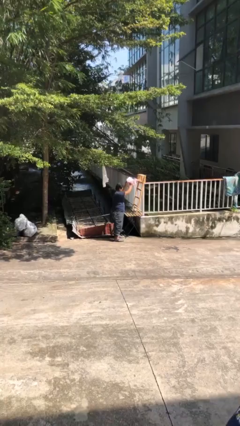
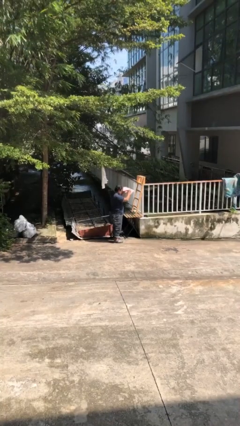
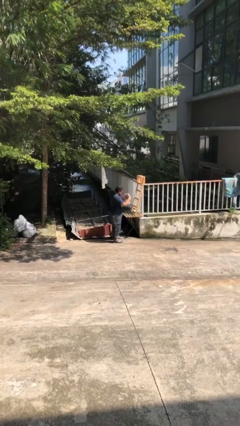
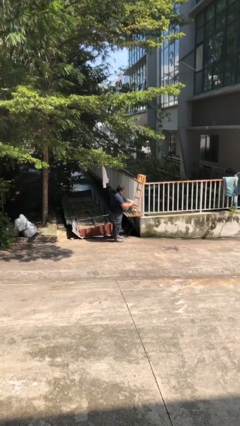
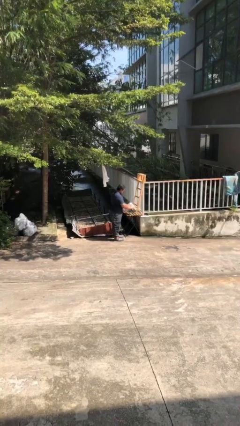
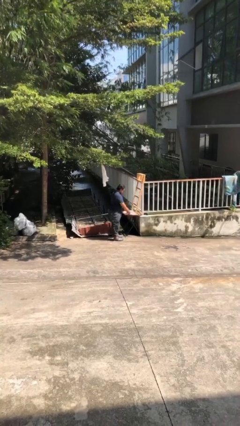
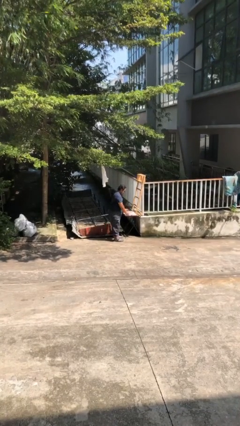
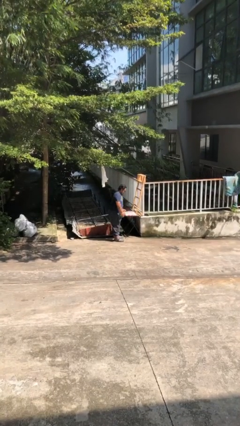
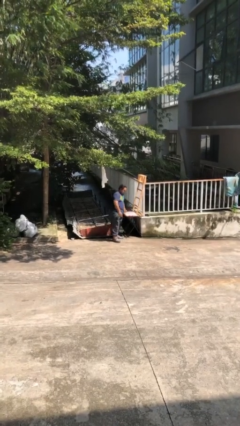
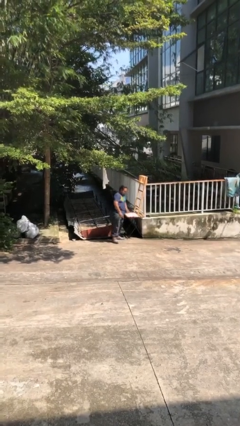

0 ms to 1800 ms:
person puts down object on table

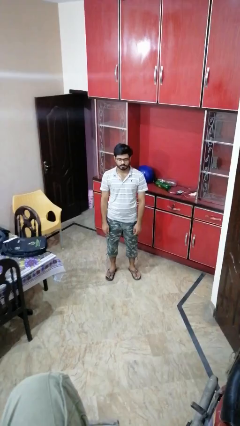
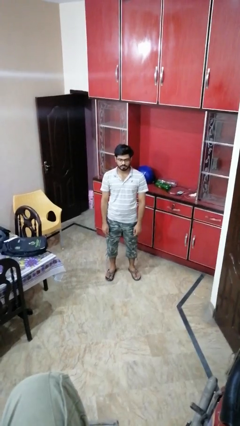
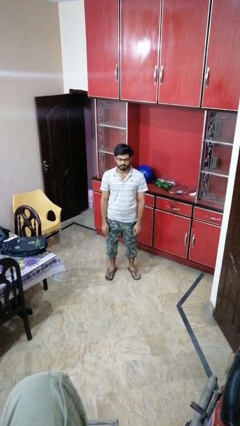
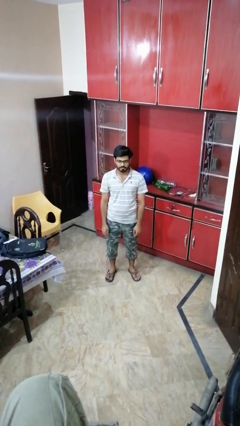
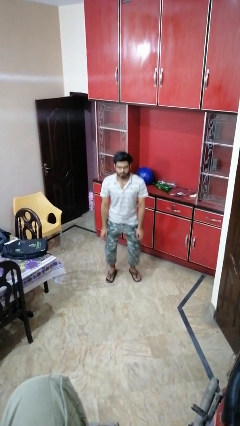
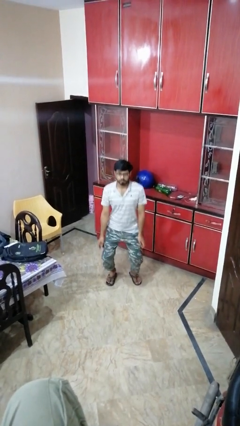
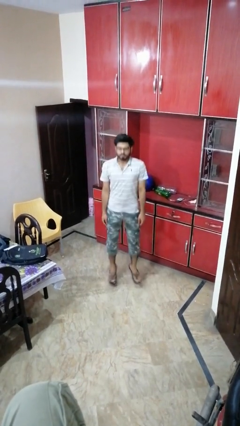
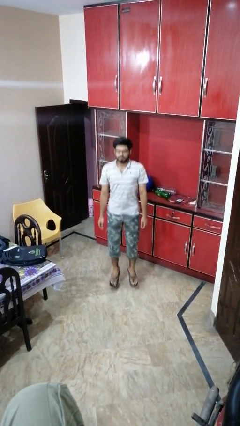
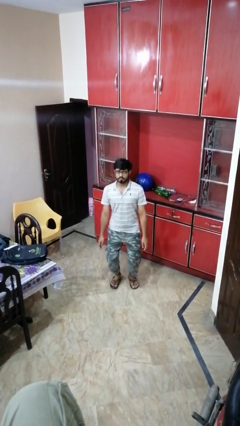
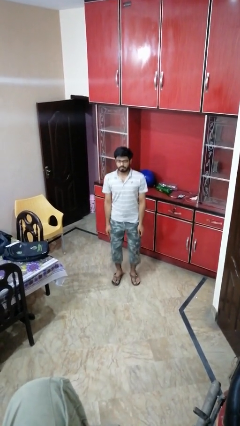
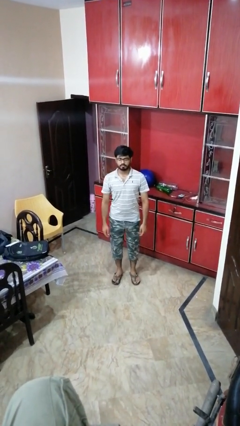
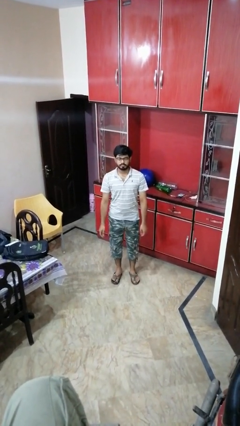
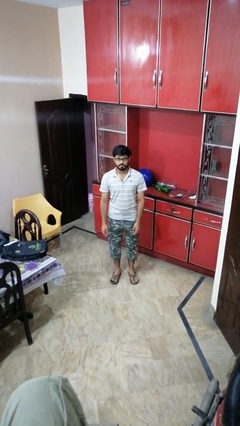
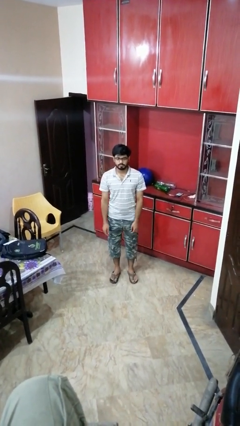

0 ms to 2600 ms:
person jumps

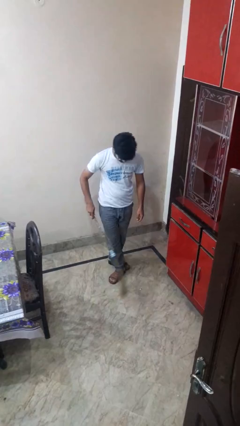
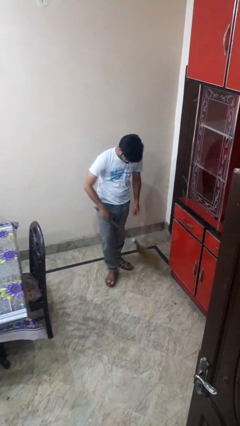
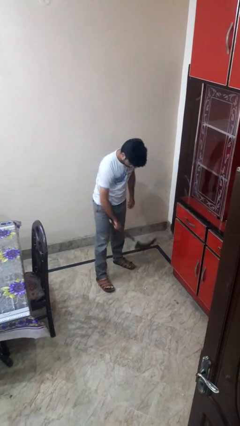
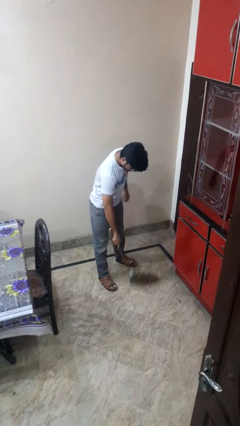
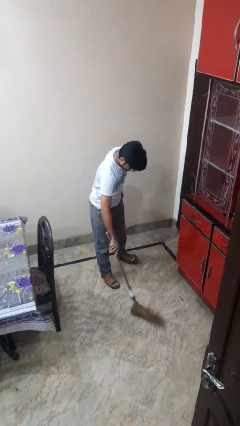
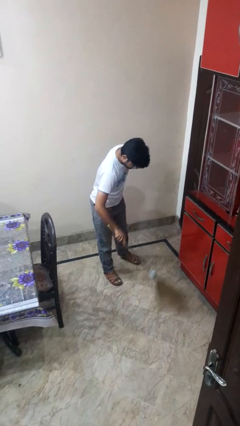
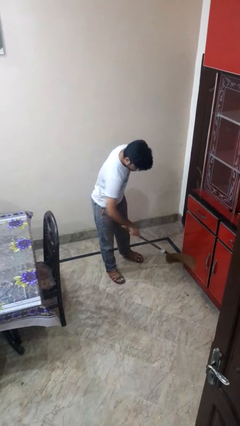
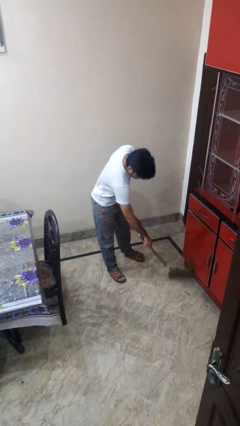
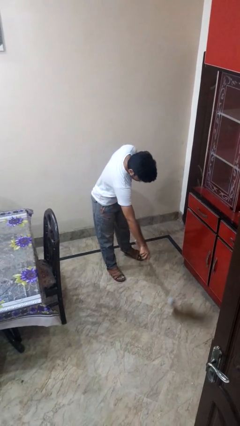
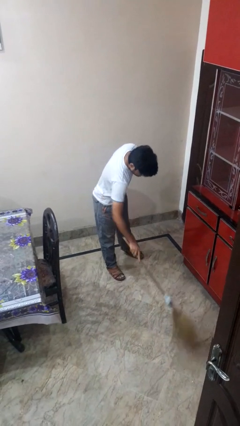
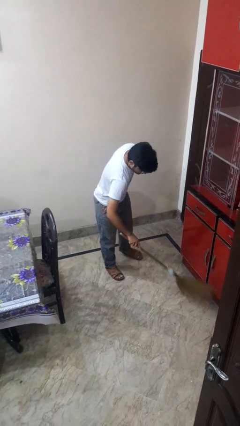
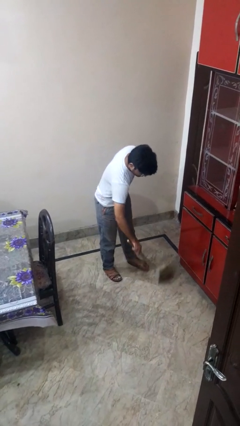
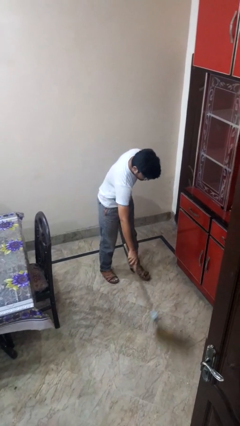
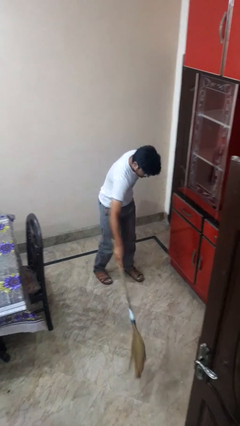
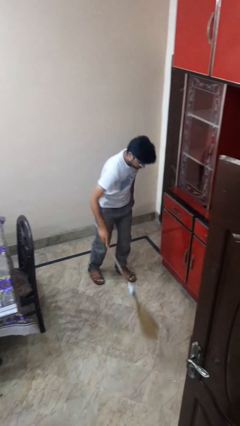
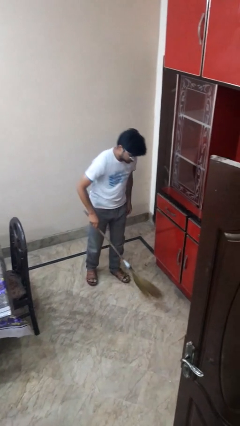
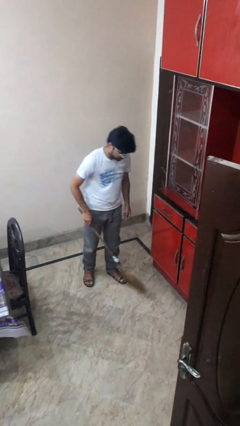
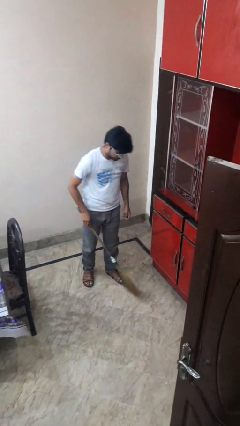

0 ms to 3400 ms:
person sweeps floor

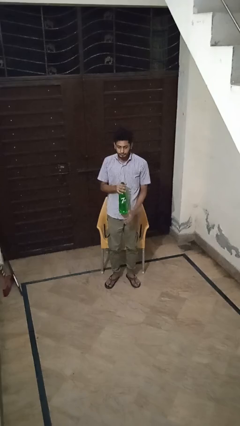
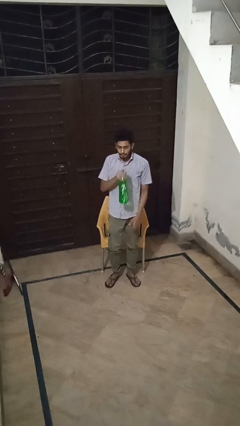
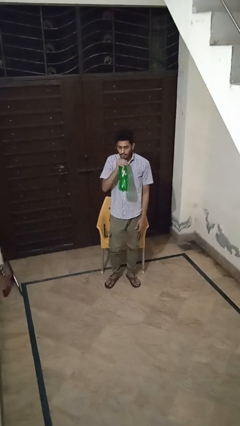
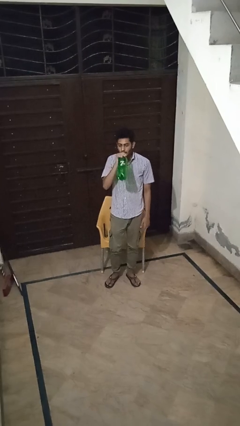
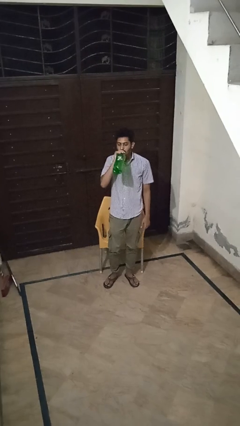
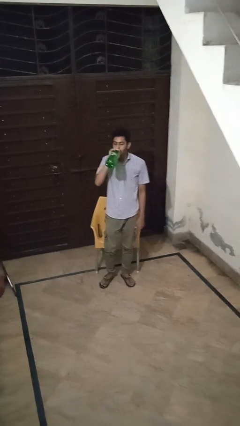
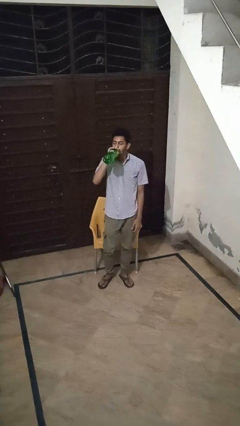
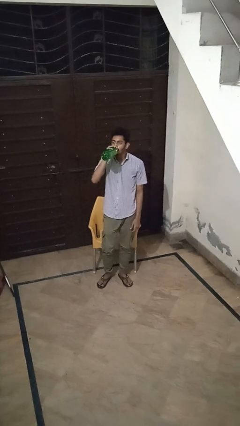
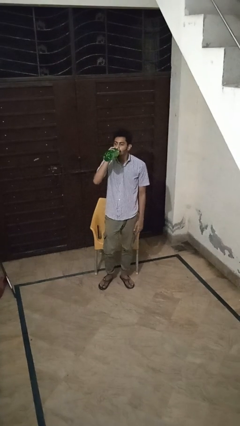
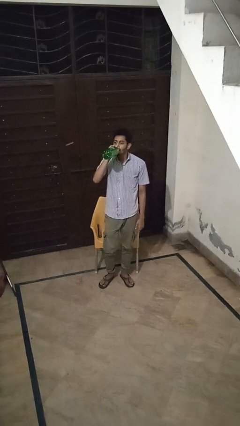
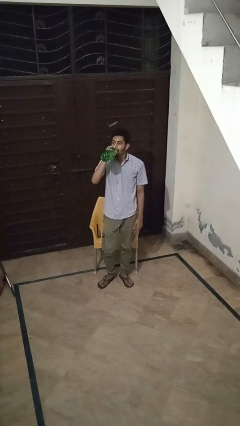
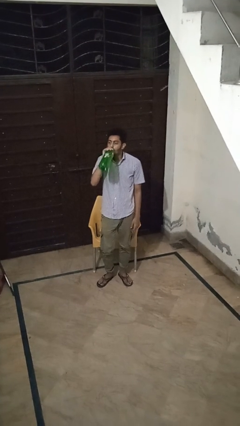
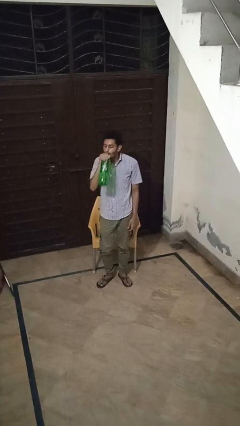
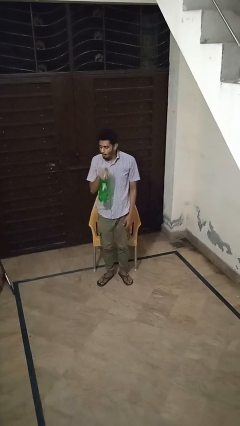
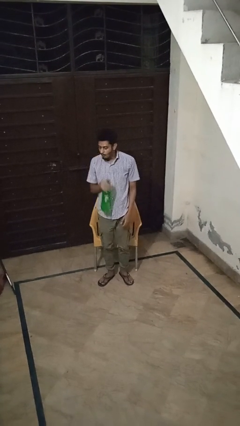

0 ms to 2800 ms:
person drinks from bottle

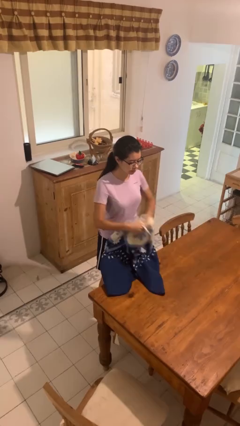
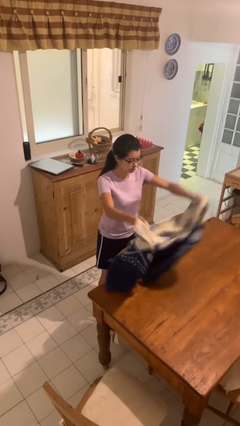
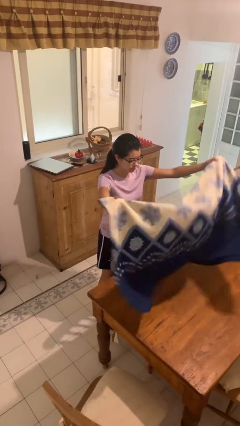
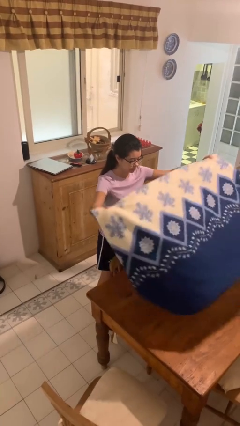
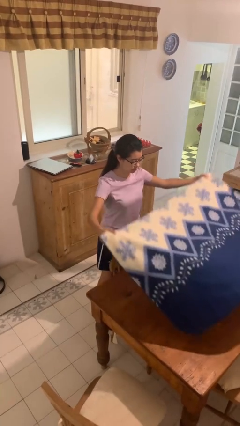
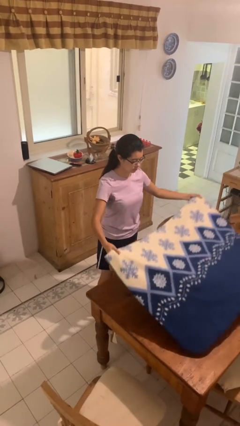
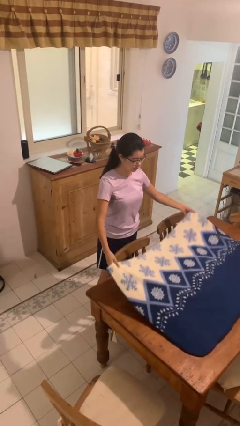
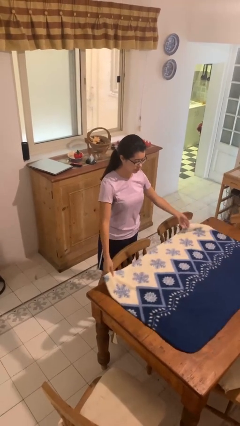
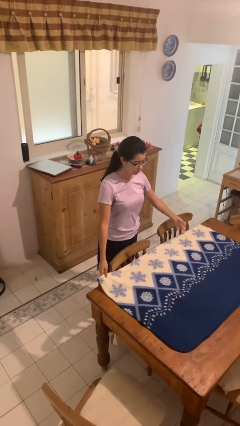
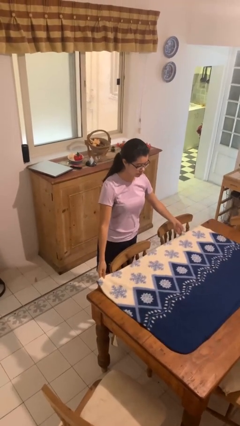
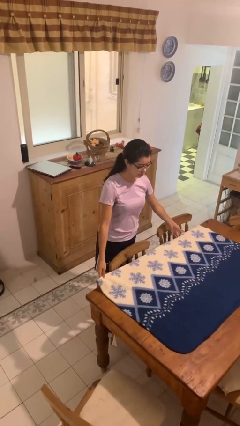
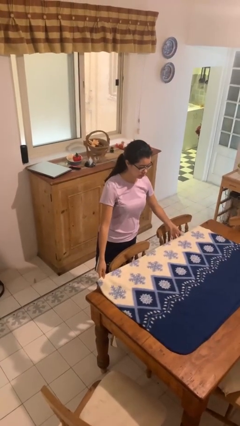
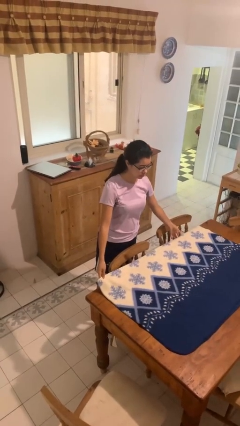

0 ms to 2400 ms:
person spreads tablecloth

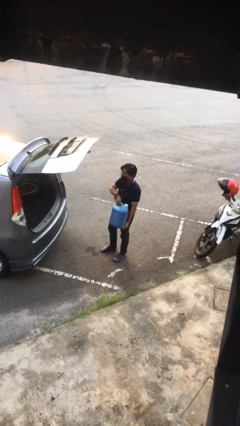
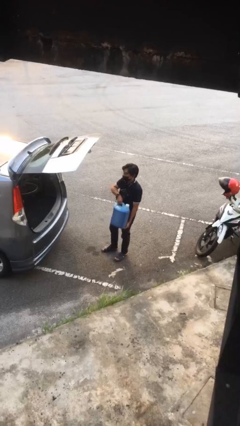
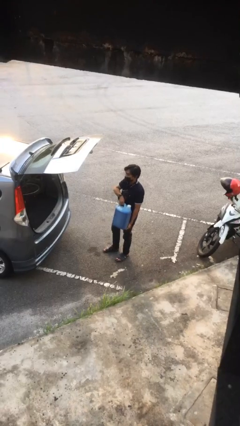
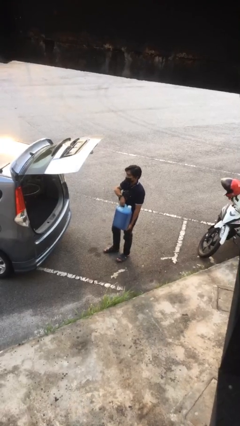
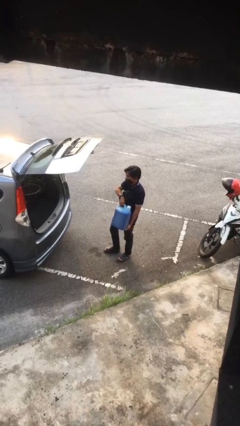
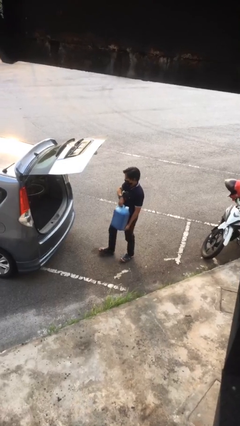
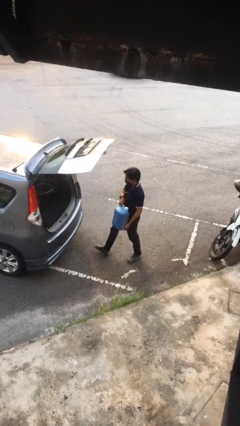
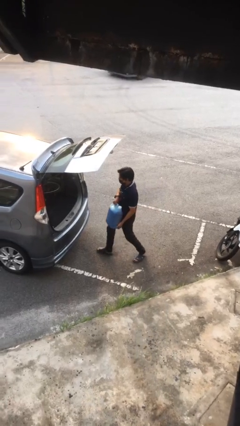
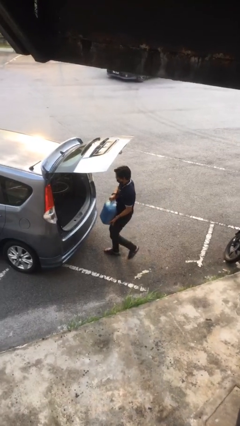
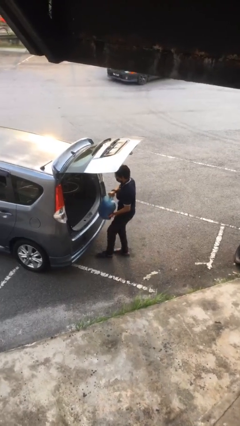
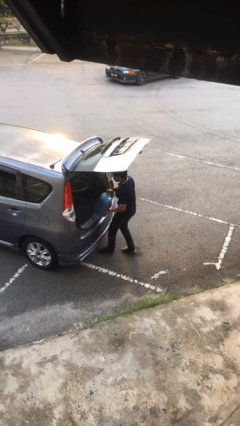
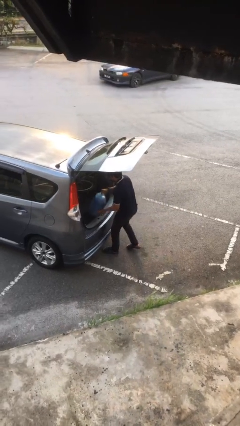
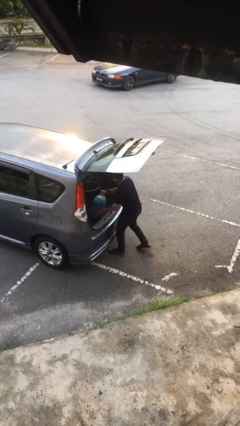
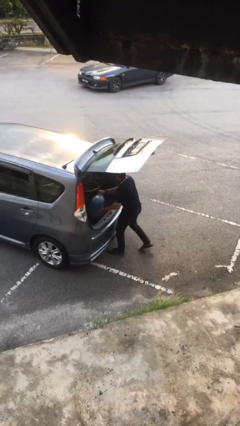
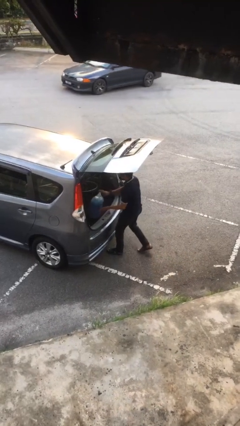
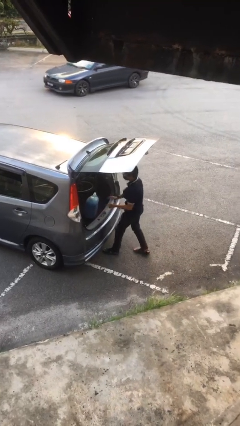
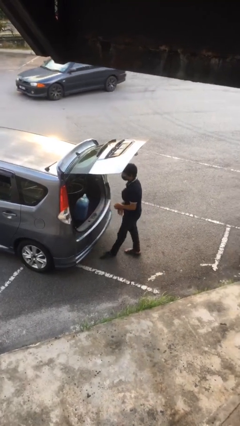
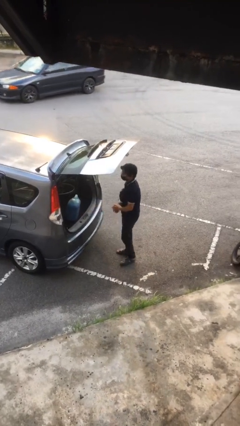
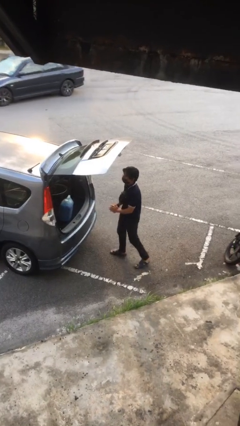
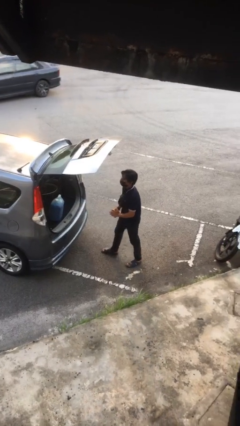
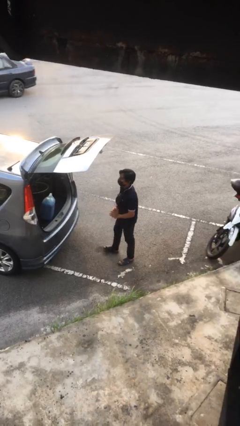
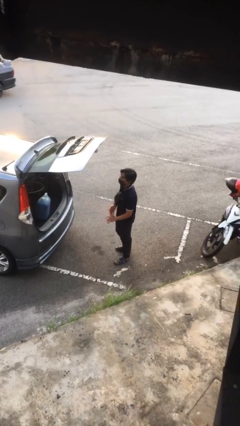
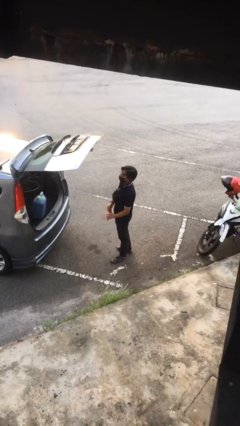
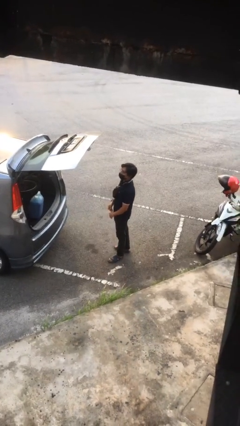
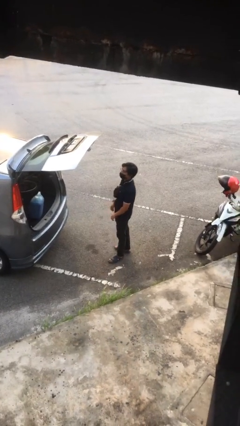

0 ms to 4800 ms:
person loads car
